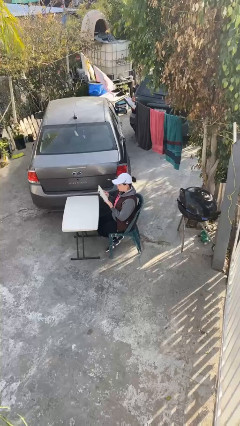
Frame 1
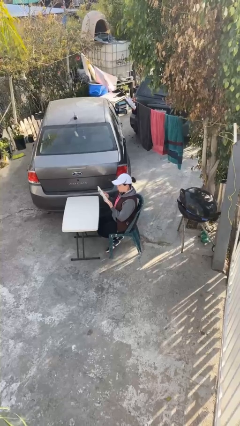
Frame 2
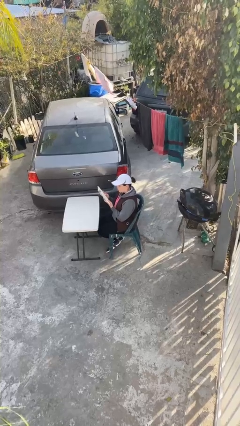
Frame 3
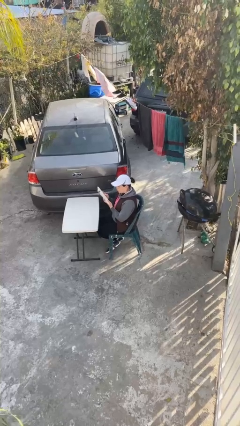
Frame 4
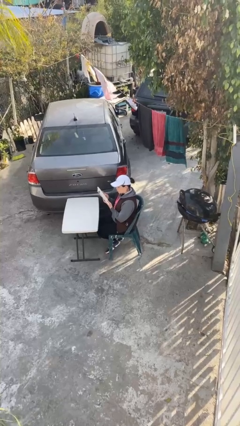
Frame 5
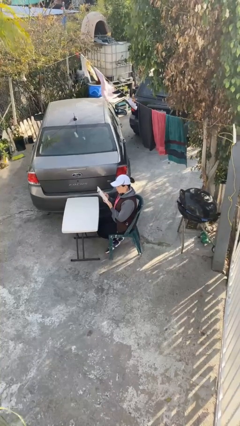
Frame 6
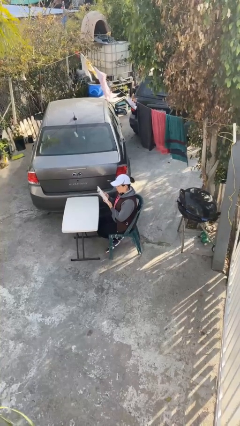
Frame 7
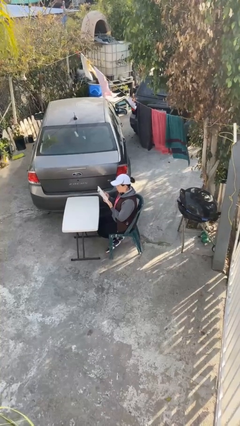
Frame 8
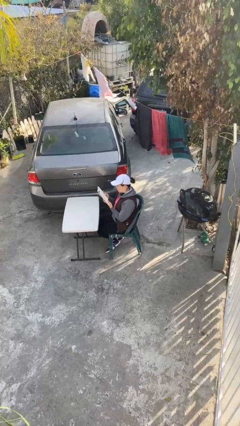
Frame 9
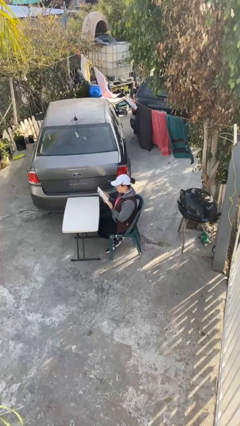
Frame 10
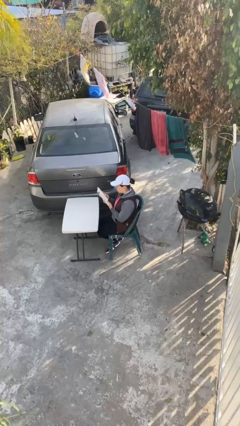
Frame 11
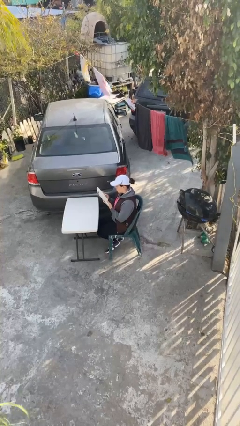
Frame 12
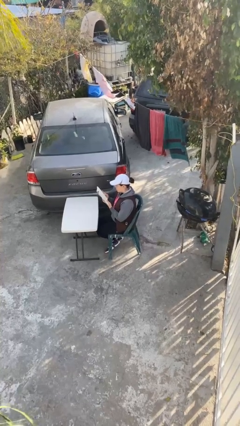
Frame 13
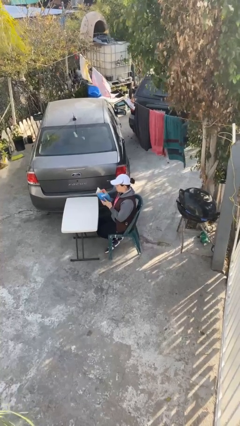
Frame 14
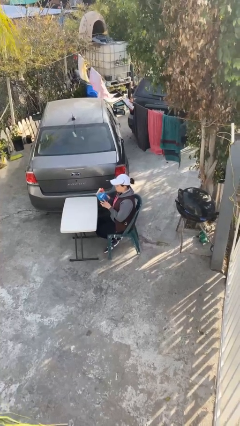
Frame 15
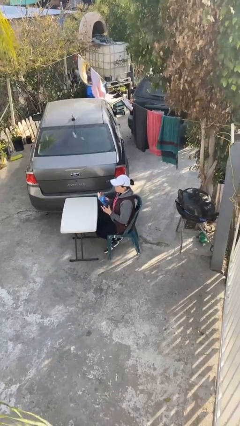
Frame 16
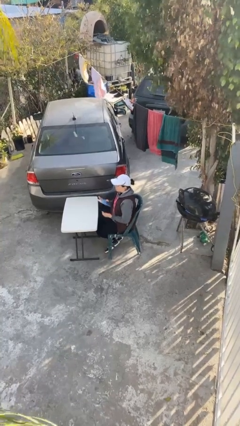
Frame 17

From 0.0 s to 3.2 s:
person reads document

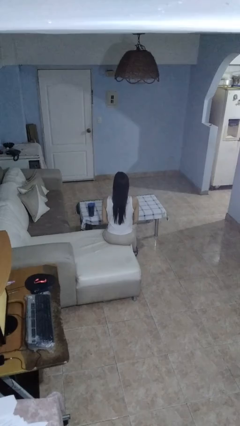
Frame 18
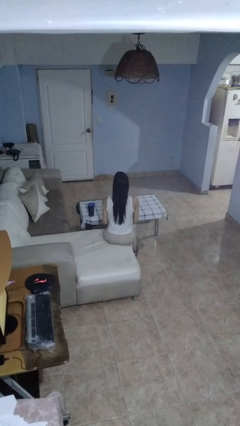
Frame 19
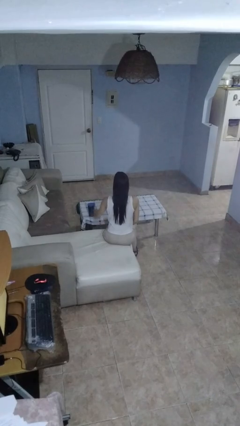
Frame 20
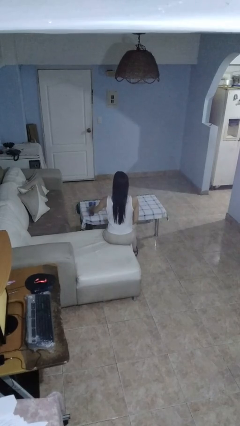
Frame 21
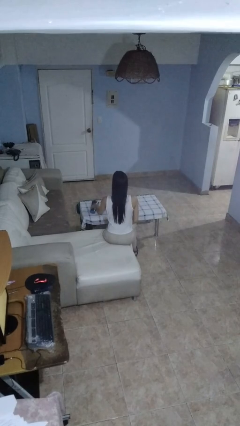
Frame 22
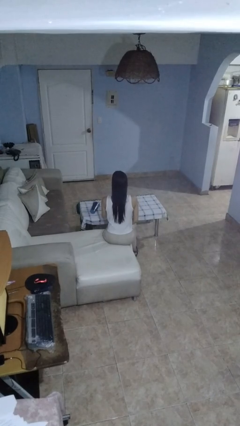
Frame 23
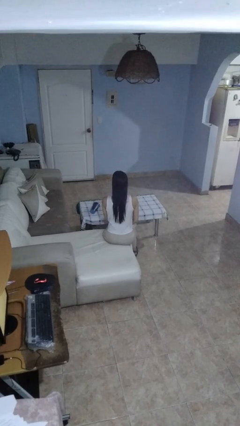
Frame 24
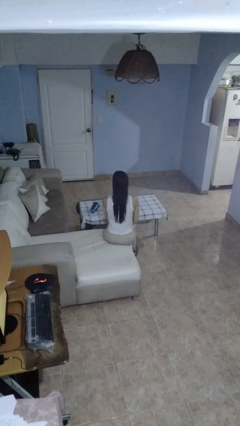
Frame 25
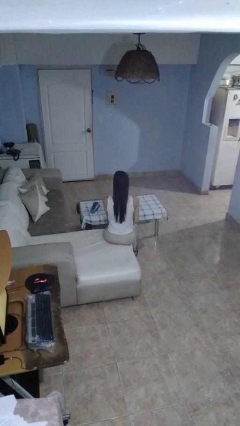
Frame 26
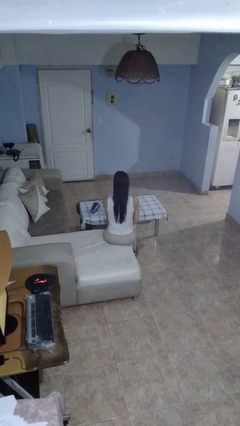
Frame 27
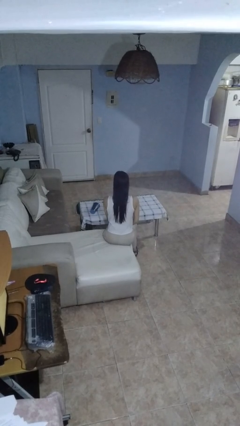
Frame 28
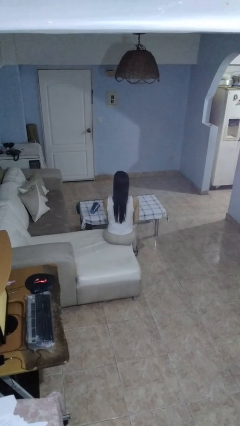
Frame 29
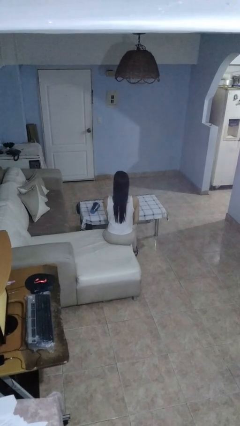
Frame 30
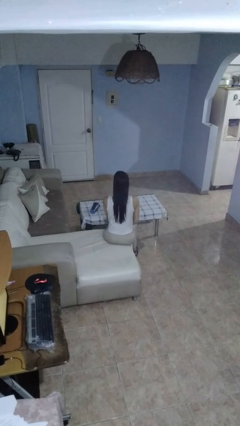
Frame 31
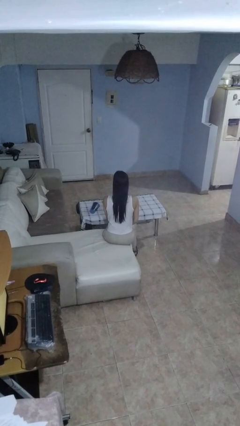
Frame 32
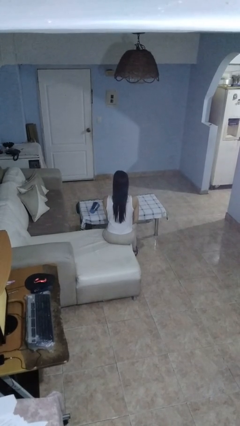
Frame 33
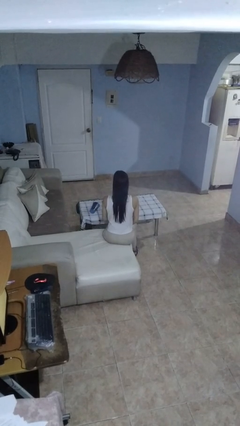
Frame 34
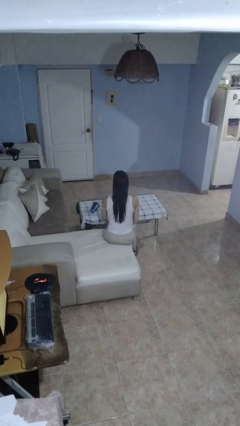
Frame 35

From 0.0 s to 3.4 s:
person knocks over glass

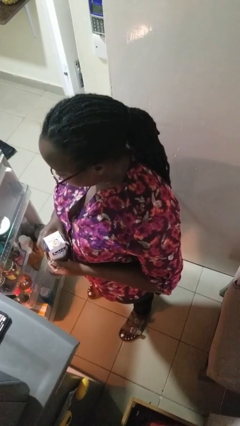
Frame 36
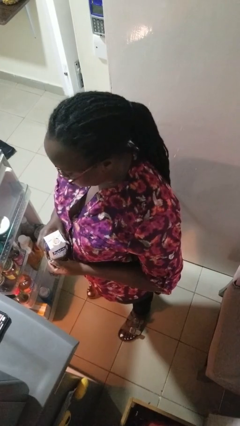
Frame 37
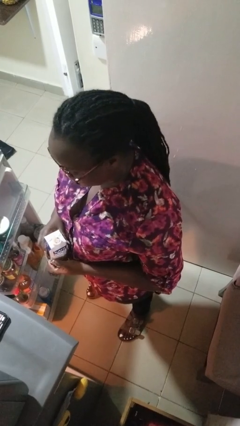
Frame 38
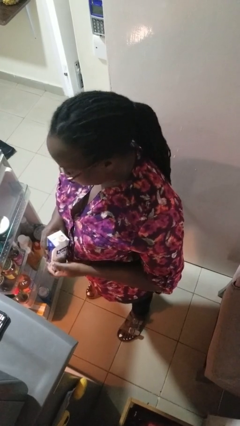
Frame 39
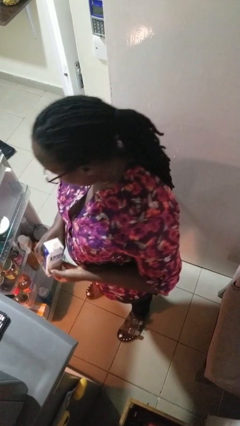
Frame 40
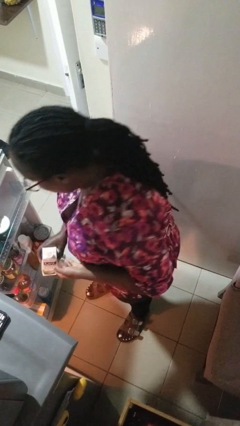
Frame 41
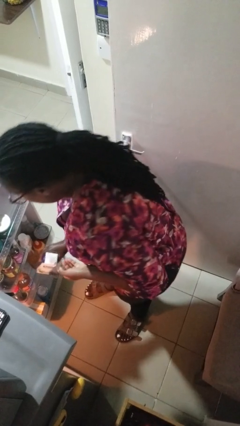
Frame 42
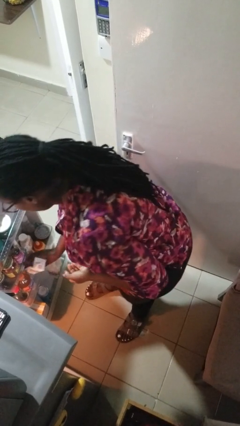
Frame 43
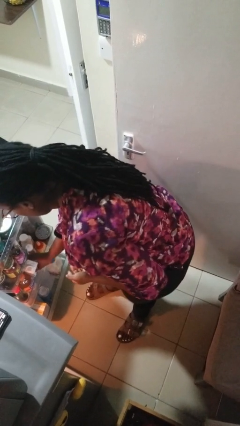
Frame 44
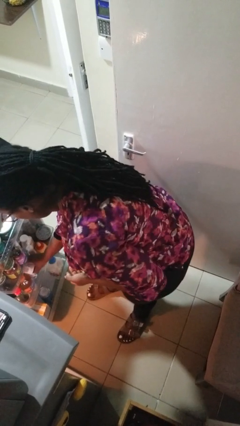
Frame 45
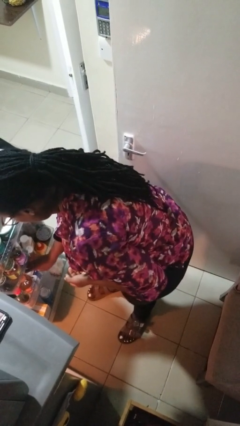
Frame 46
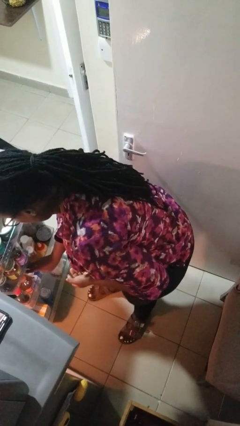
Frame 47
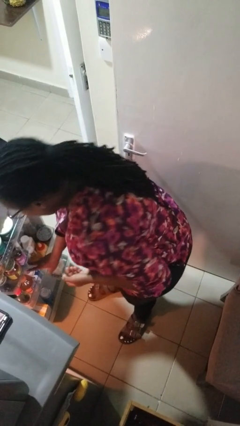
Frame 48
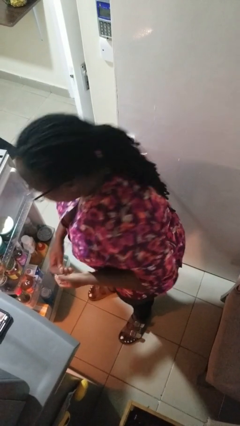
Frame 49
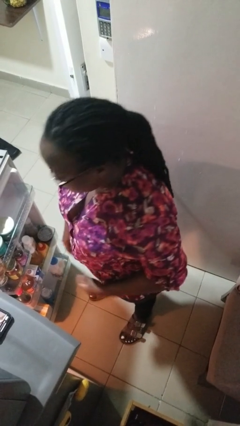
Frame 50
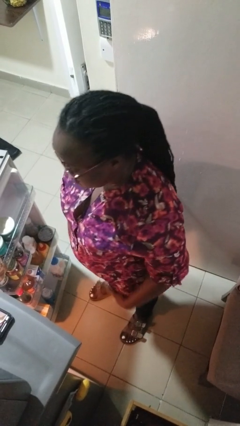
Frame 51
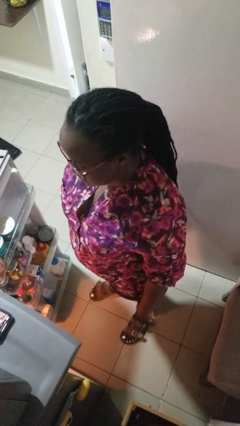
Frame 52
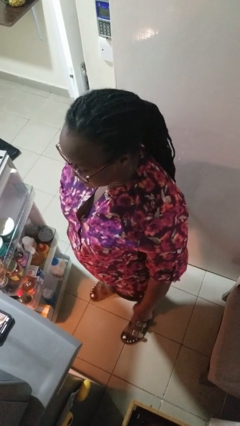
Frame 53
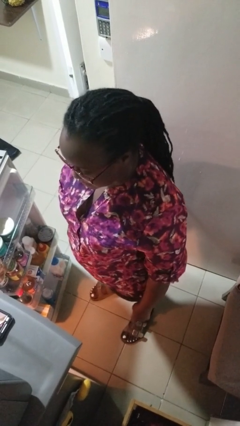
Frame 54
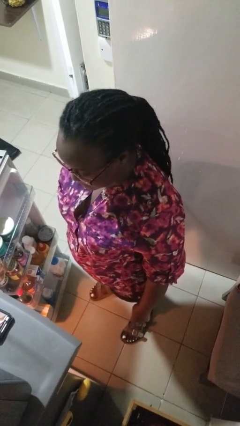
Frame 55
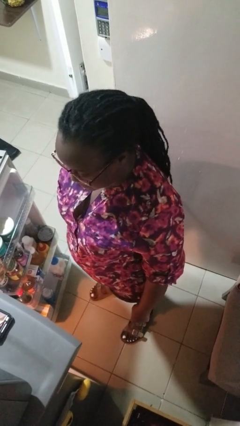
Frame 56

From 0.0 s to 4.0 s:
person puts object into refrigerator

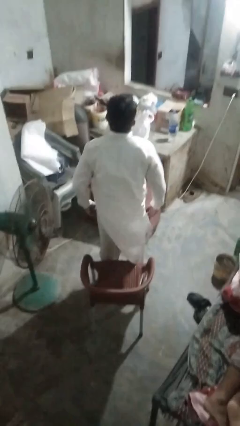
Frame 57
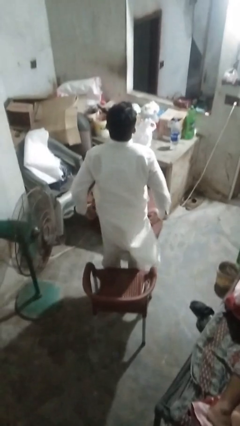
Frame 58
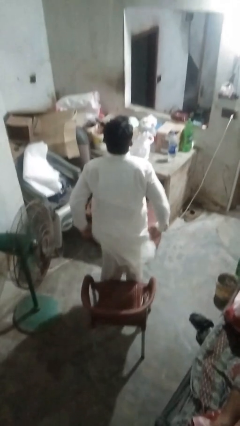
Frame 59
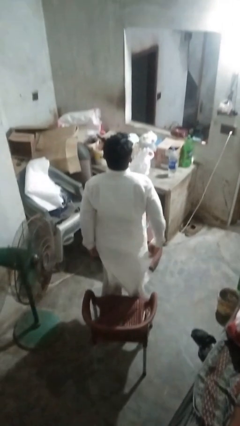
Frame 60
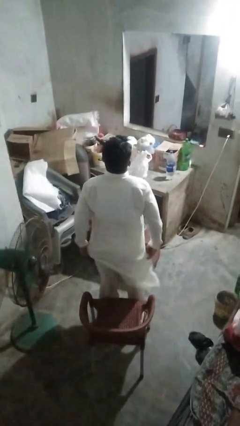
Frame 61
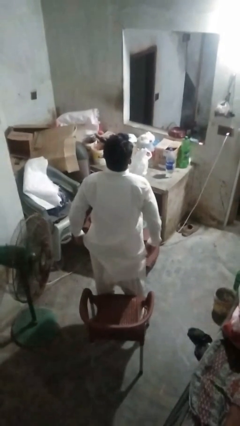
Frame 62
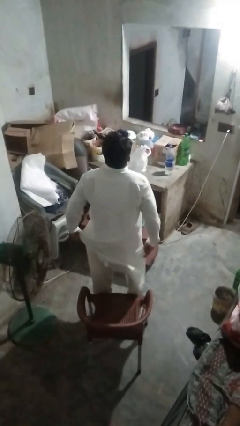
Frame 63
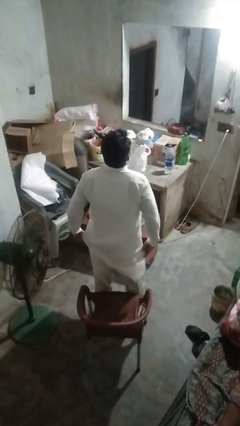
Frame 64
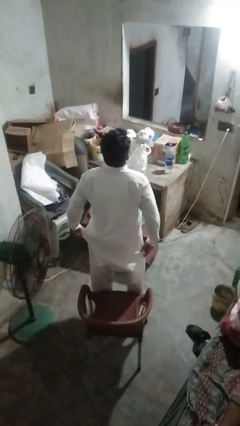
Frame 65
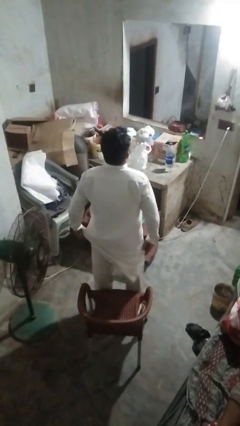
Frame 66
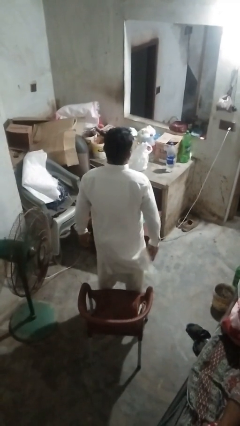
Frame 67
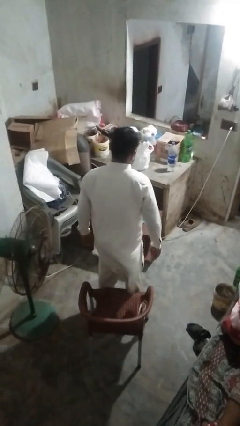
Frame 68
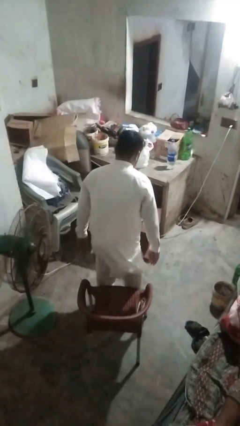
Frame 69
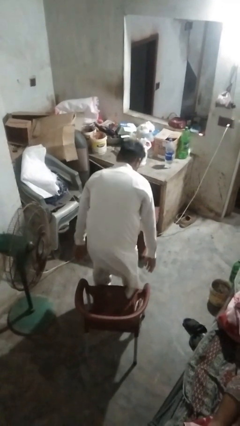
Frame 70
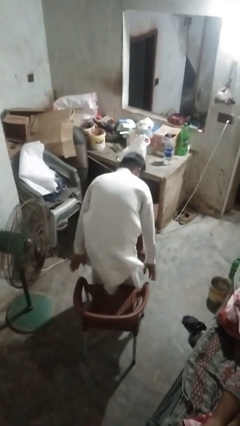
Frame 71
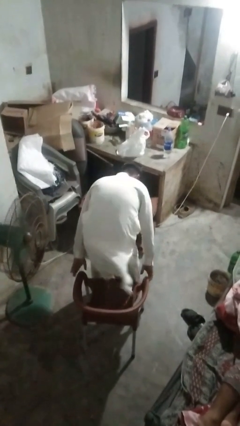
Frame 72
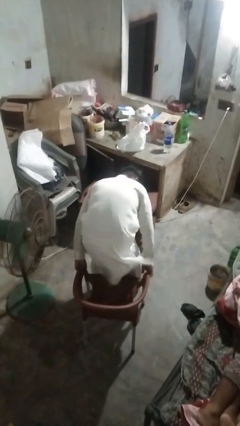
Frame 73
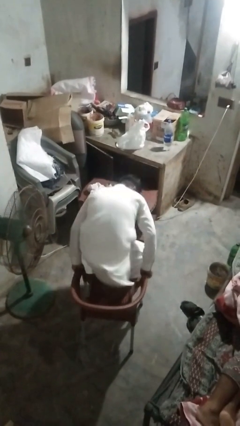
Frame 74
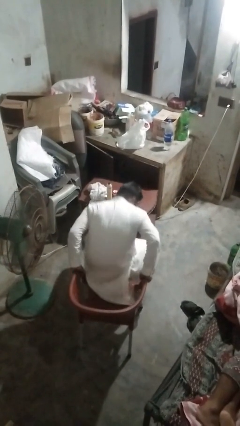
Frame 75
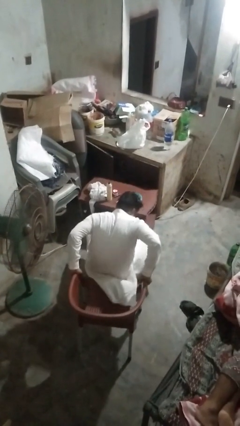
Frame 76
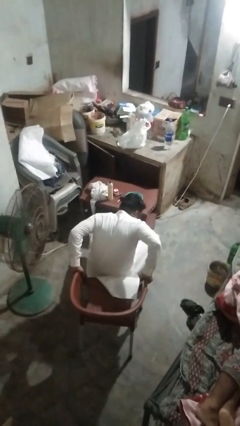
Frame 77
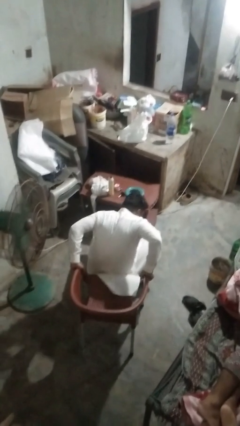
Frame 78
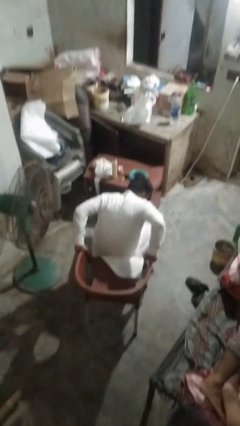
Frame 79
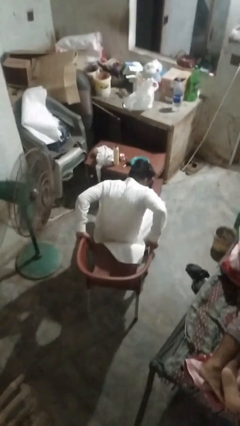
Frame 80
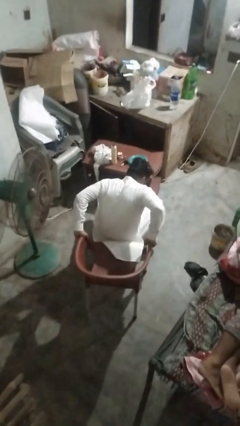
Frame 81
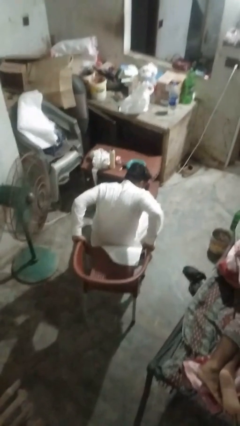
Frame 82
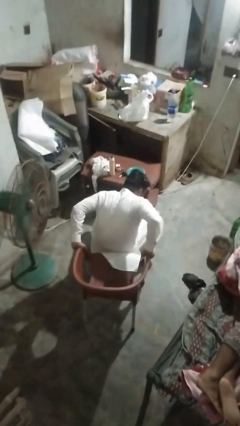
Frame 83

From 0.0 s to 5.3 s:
person falls from chair

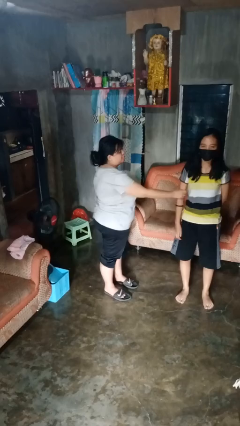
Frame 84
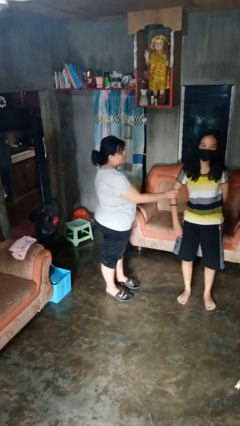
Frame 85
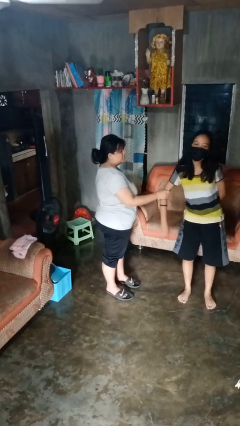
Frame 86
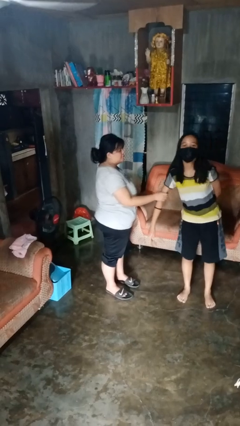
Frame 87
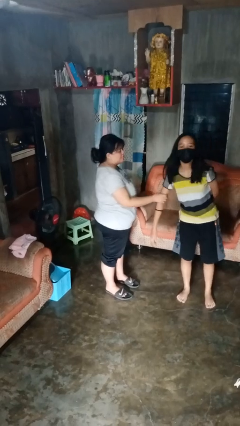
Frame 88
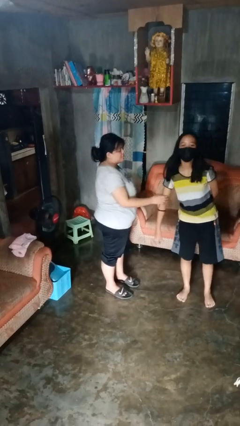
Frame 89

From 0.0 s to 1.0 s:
person grabs person by bicep
